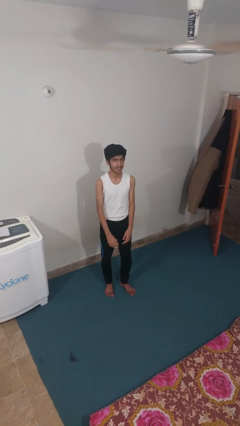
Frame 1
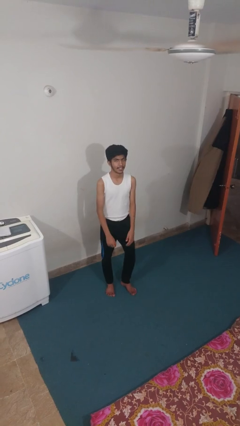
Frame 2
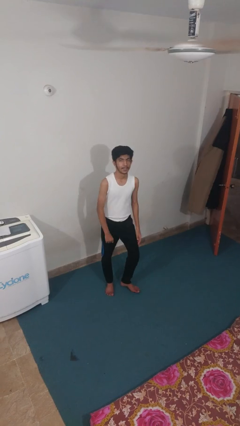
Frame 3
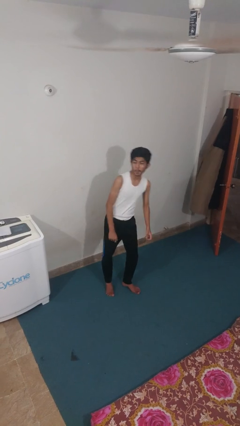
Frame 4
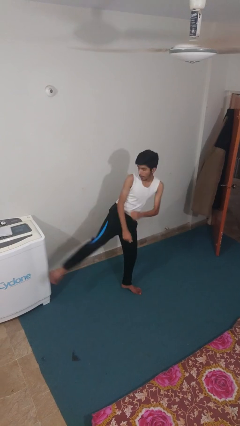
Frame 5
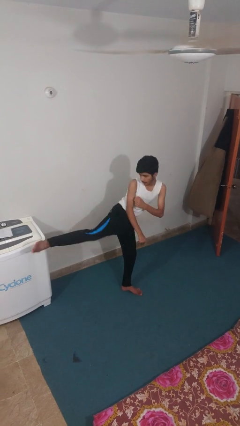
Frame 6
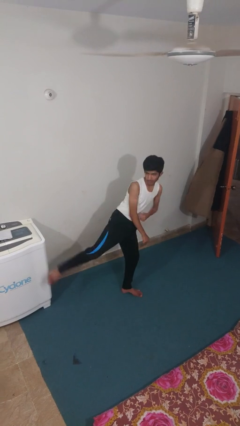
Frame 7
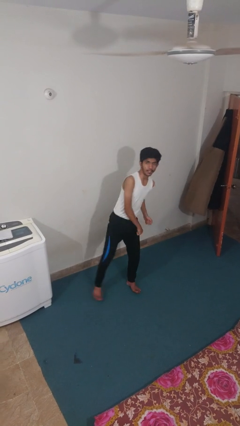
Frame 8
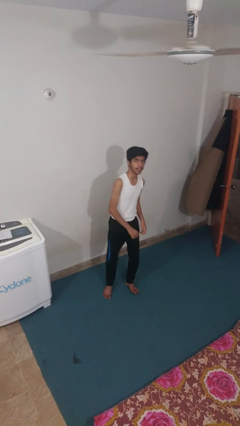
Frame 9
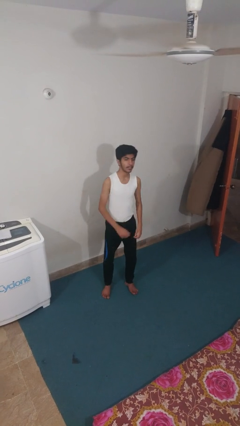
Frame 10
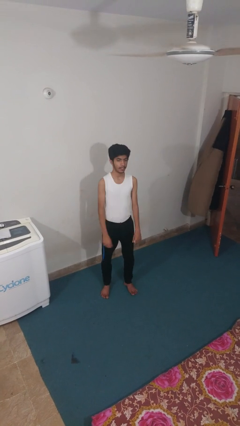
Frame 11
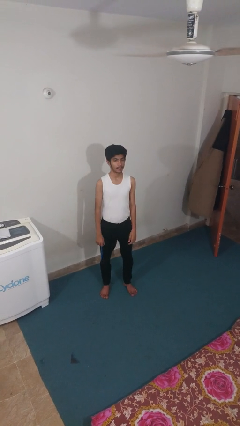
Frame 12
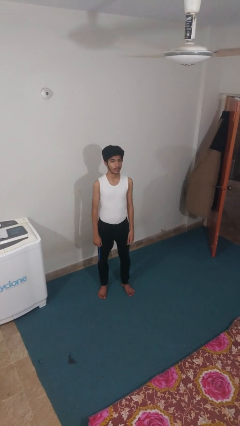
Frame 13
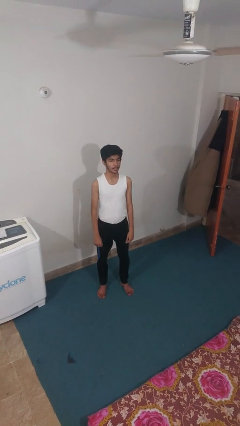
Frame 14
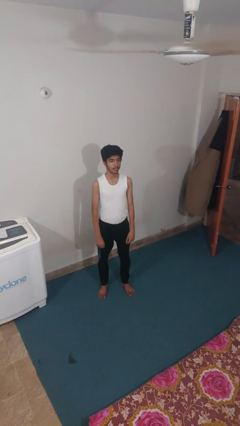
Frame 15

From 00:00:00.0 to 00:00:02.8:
person karate kicks

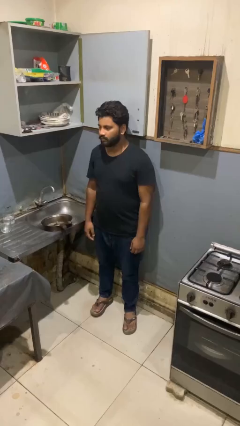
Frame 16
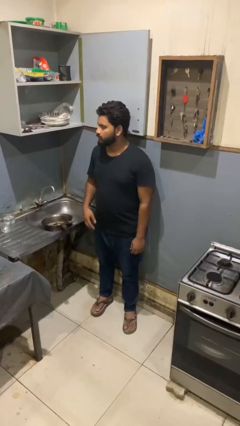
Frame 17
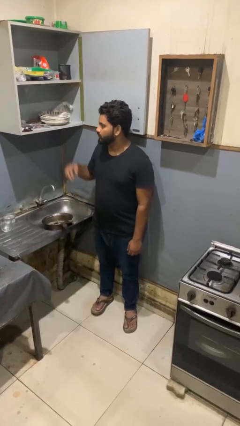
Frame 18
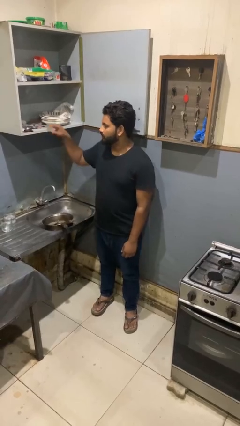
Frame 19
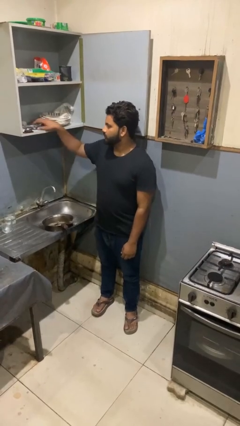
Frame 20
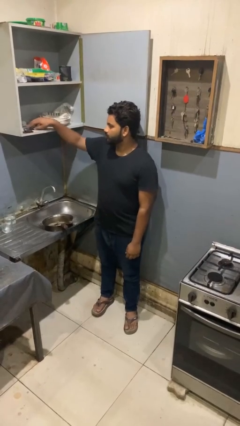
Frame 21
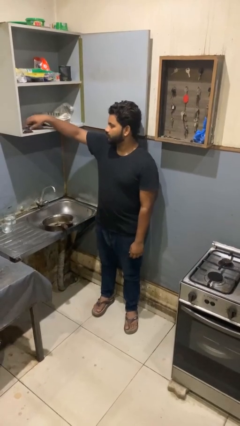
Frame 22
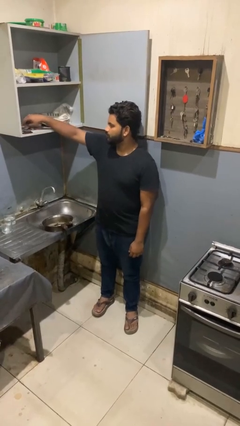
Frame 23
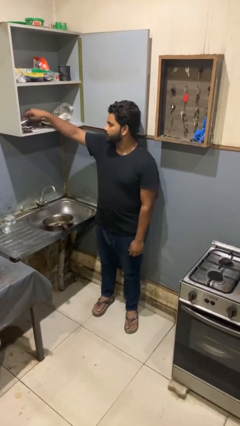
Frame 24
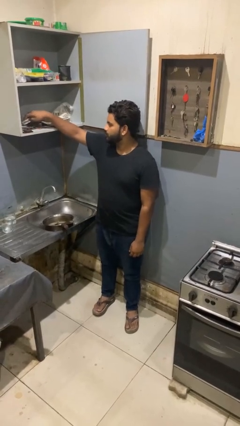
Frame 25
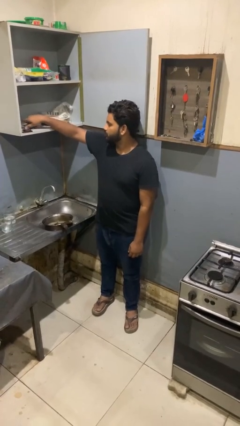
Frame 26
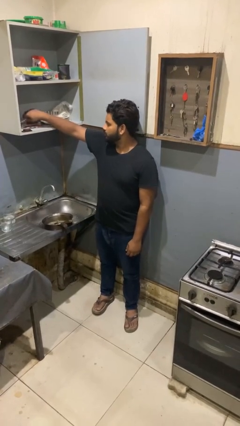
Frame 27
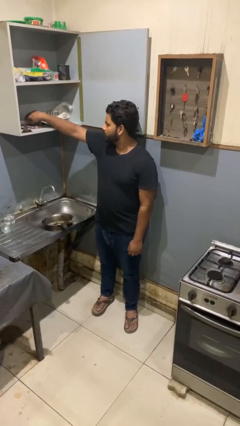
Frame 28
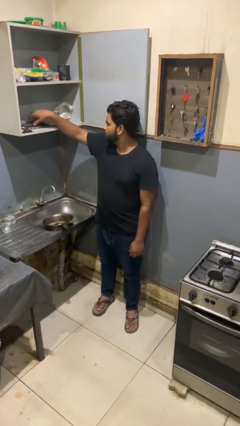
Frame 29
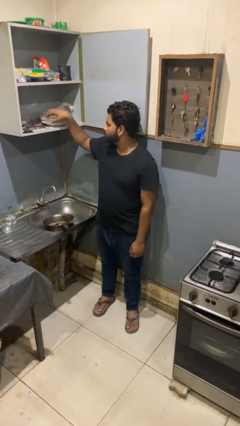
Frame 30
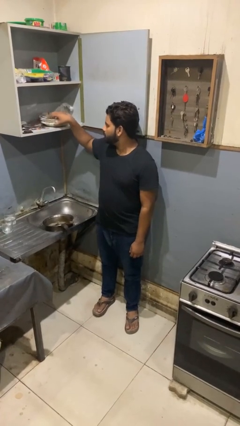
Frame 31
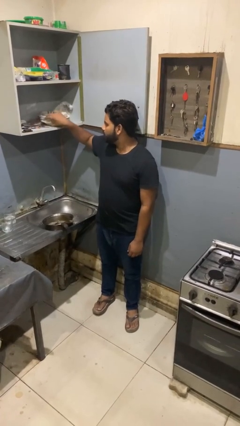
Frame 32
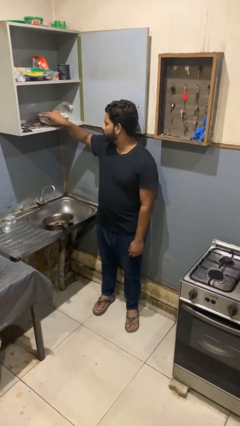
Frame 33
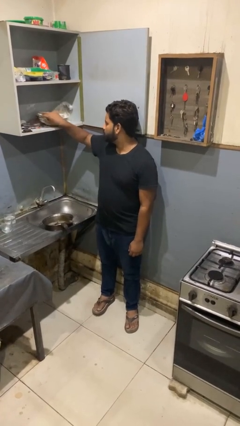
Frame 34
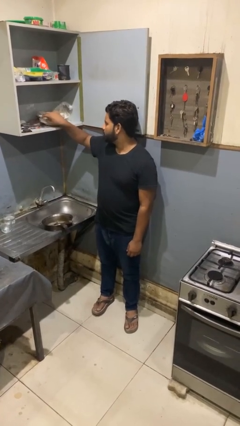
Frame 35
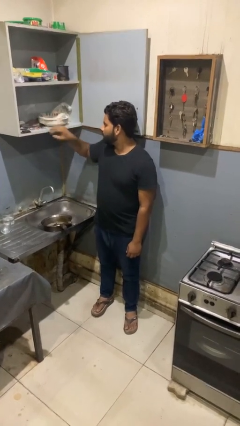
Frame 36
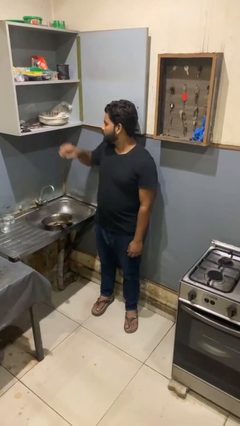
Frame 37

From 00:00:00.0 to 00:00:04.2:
person searches in kitchen drawer

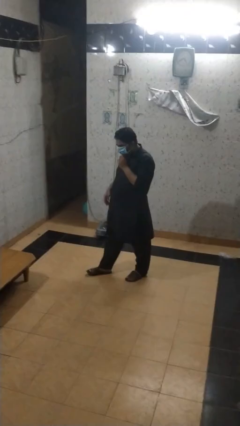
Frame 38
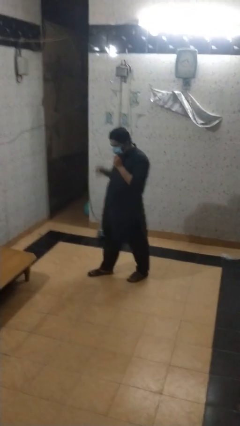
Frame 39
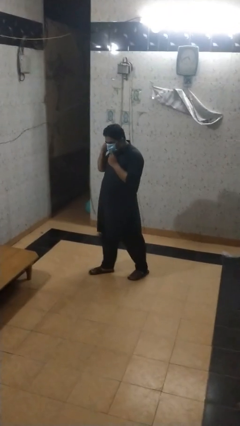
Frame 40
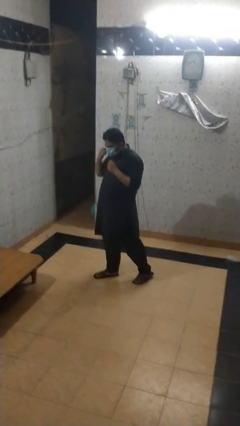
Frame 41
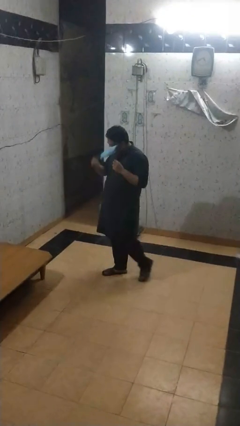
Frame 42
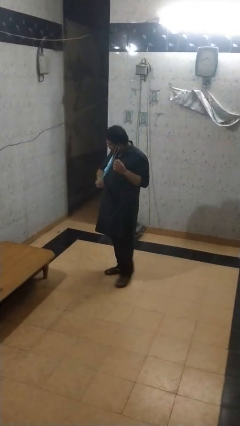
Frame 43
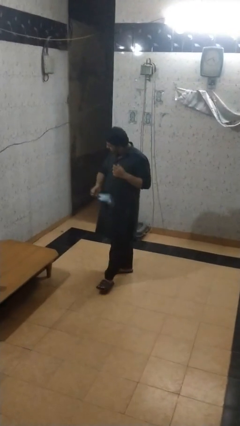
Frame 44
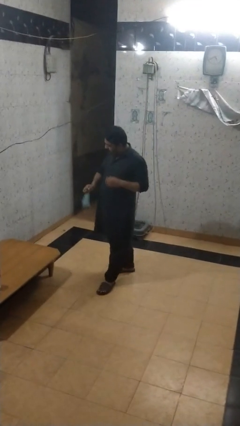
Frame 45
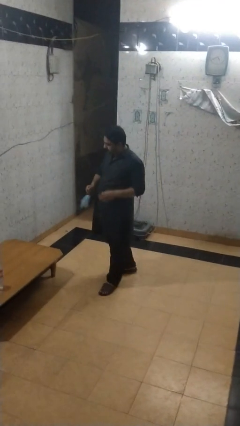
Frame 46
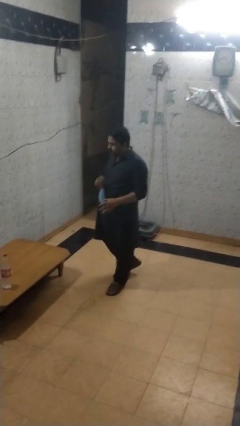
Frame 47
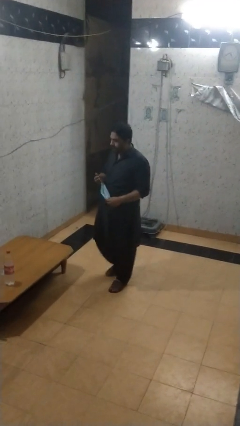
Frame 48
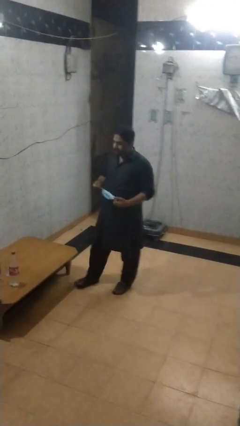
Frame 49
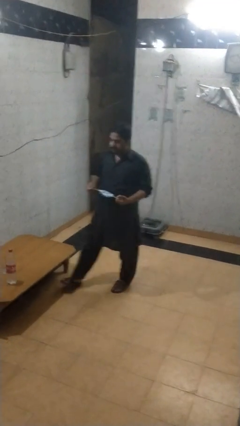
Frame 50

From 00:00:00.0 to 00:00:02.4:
person takes off facemask

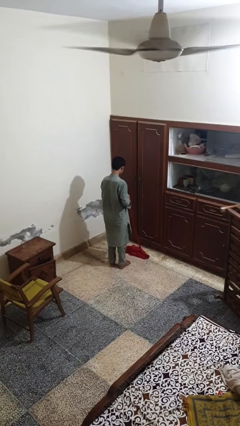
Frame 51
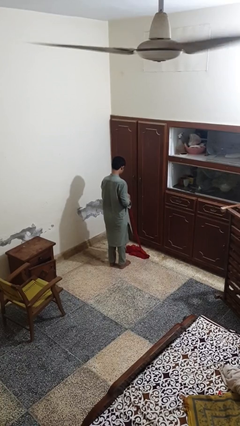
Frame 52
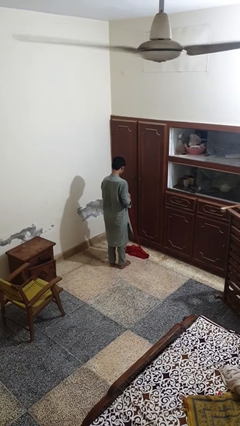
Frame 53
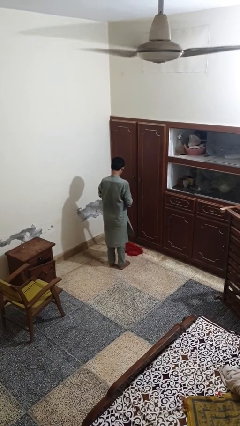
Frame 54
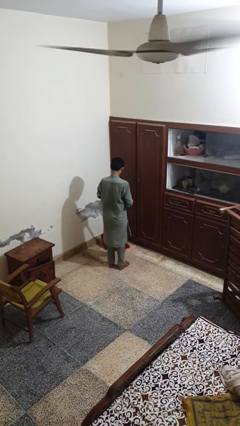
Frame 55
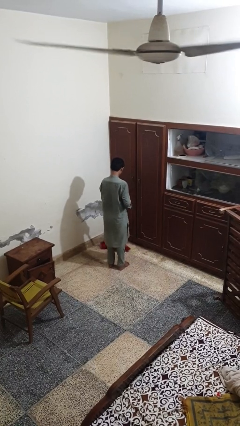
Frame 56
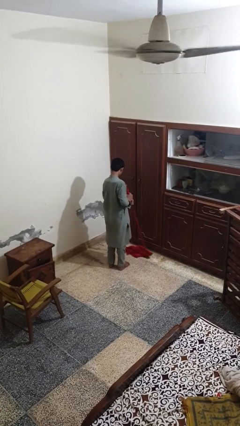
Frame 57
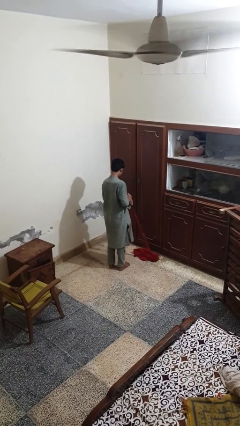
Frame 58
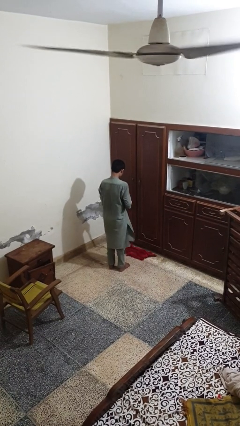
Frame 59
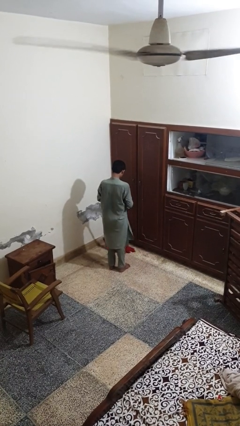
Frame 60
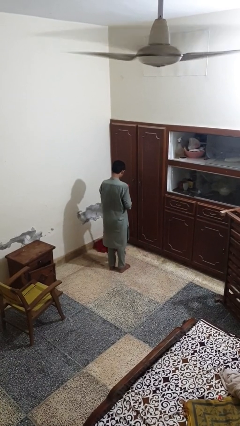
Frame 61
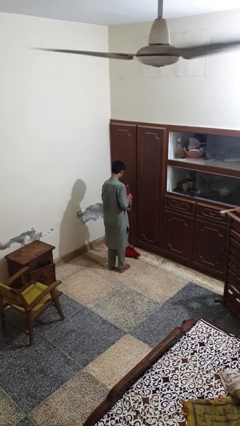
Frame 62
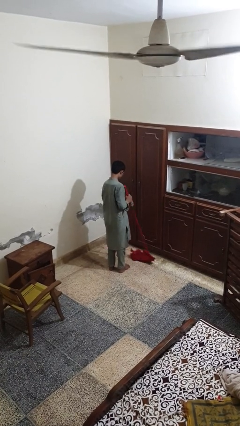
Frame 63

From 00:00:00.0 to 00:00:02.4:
person mops

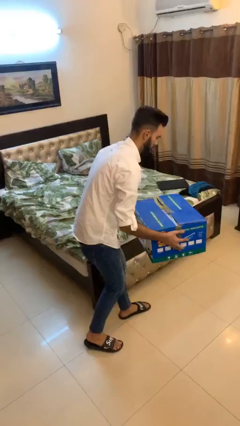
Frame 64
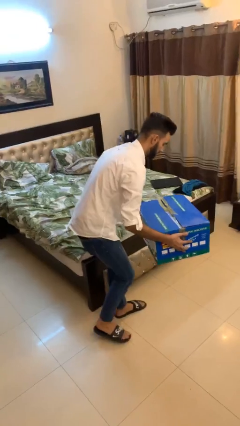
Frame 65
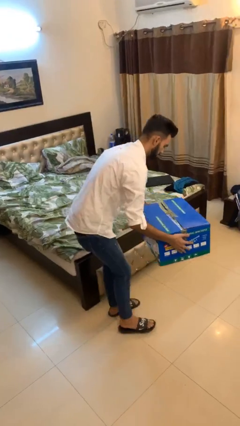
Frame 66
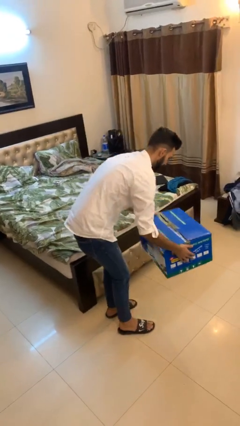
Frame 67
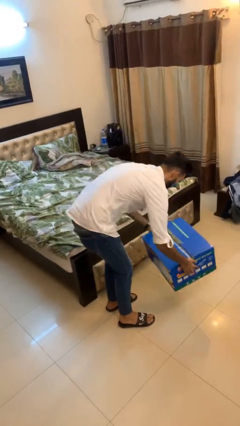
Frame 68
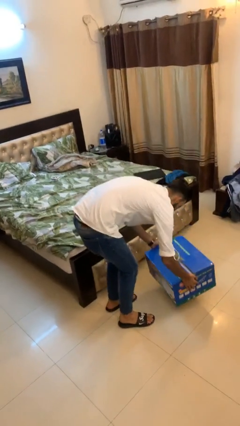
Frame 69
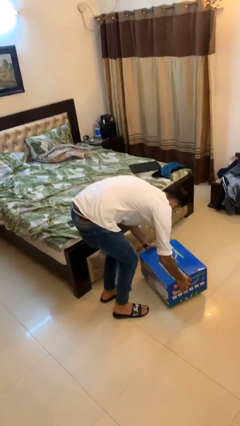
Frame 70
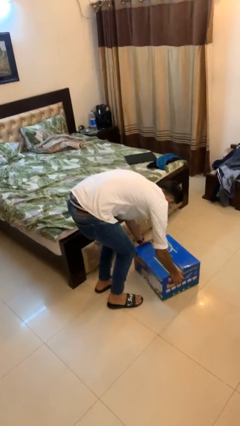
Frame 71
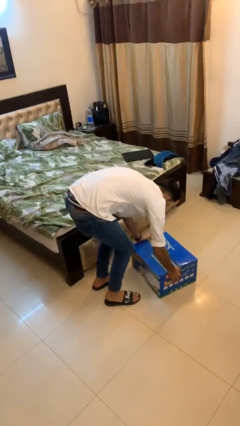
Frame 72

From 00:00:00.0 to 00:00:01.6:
person puts down object on floor

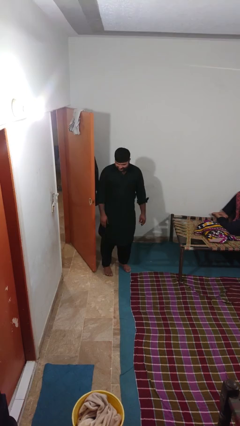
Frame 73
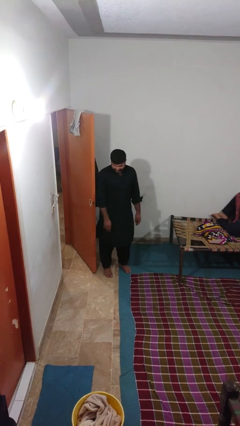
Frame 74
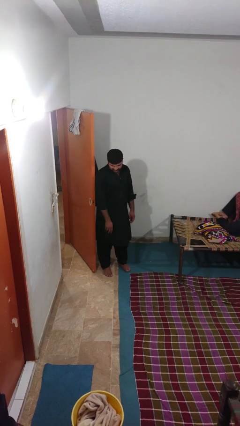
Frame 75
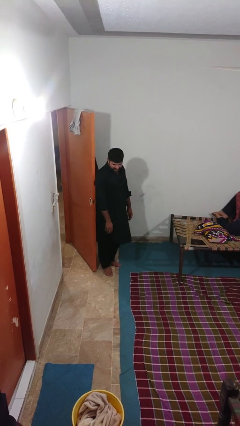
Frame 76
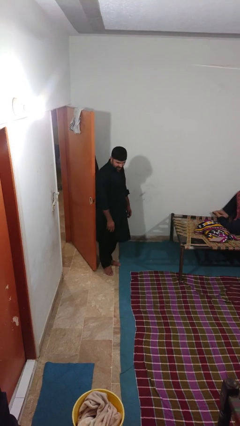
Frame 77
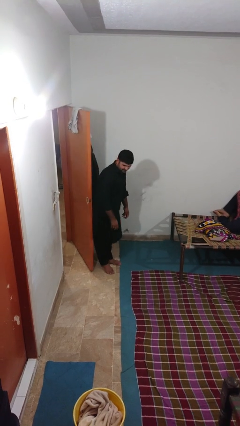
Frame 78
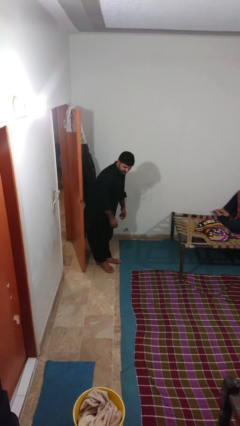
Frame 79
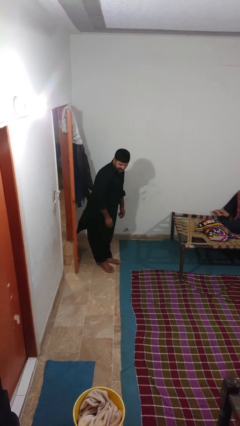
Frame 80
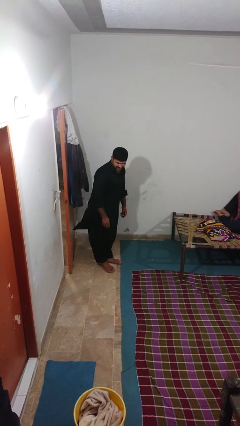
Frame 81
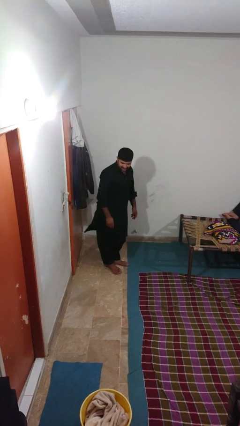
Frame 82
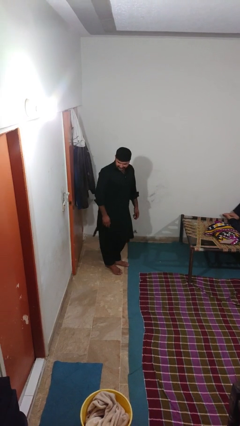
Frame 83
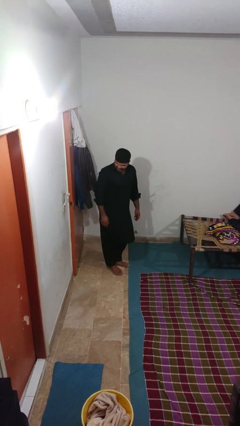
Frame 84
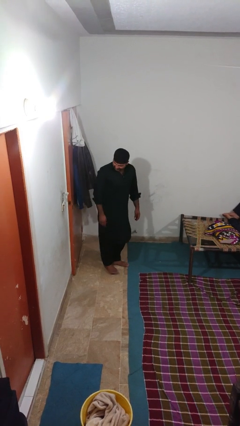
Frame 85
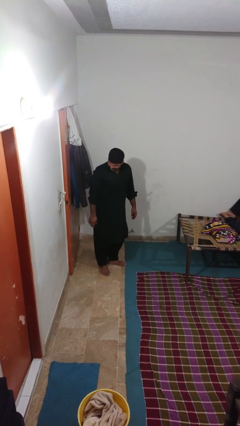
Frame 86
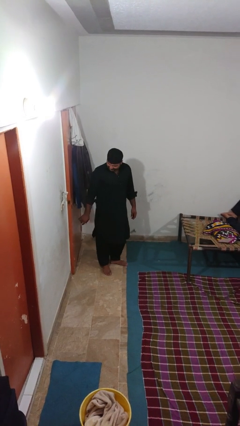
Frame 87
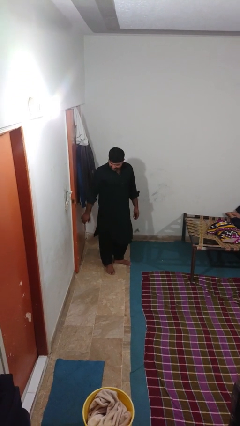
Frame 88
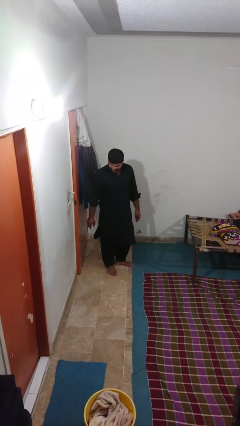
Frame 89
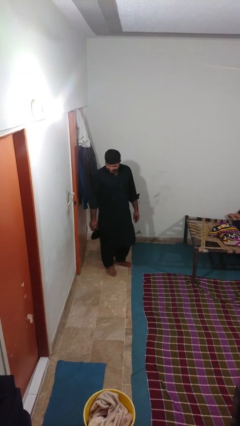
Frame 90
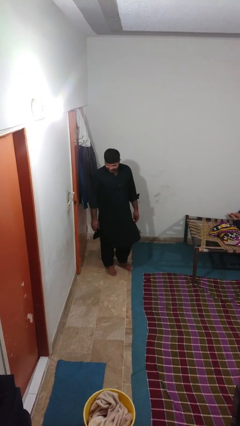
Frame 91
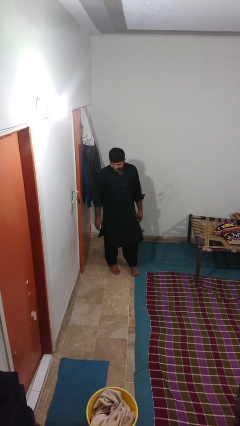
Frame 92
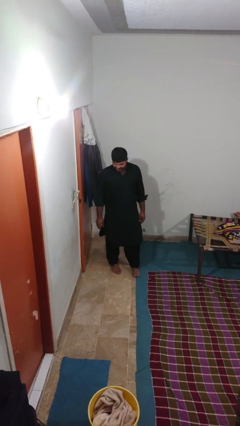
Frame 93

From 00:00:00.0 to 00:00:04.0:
person closes door with hip
